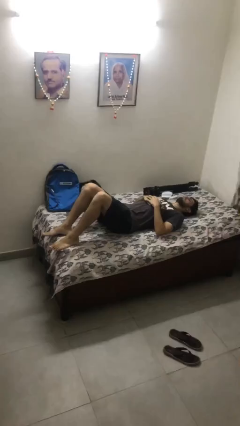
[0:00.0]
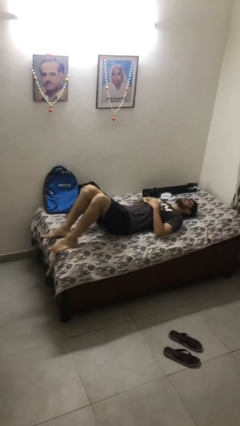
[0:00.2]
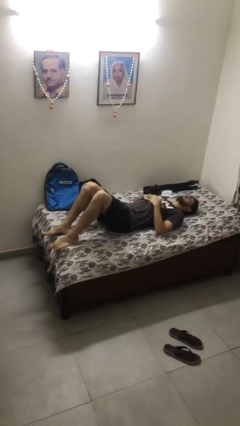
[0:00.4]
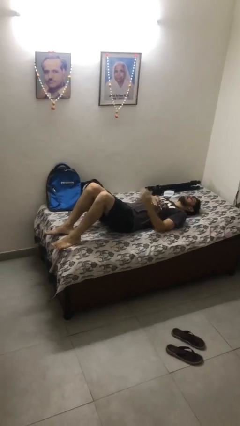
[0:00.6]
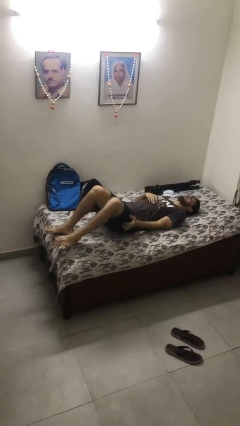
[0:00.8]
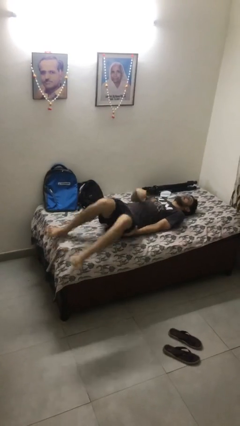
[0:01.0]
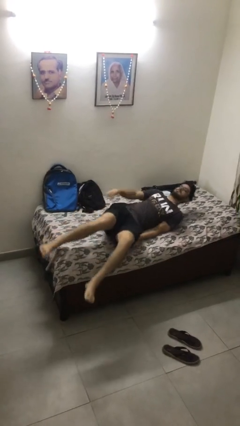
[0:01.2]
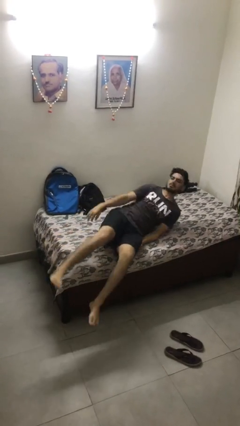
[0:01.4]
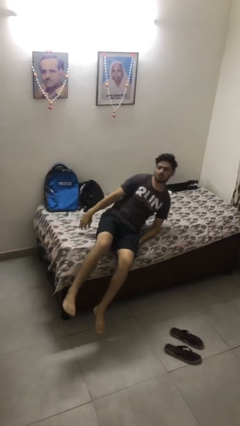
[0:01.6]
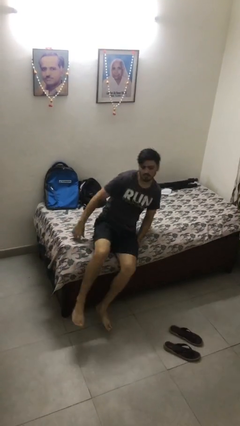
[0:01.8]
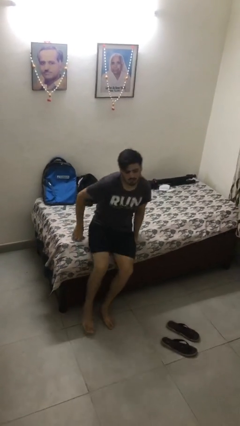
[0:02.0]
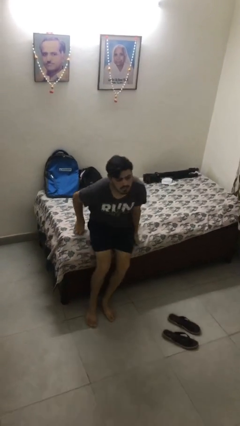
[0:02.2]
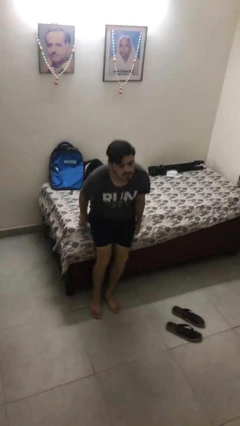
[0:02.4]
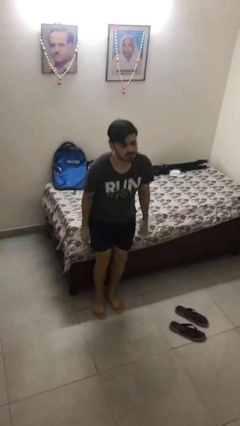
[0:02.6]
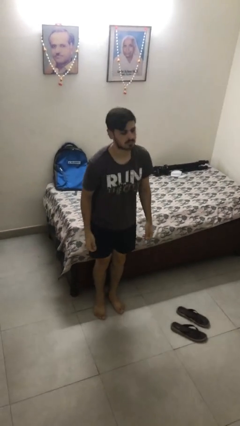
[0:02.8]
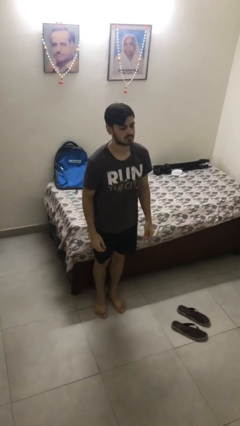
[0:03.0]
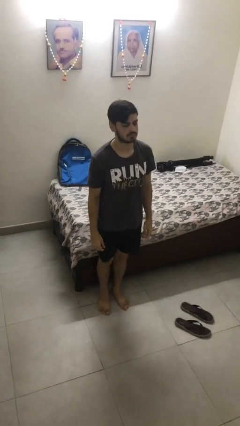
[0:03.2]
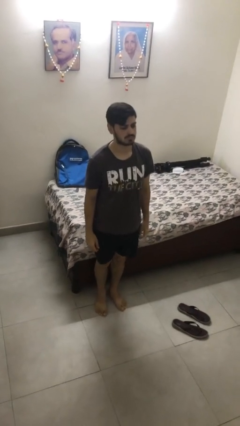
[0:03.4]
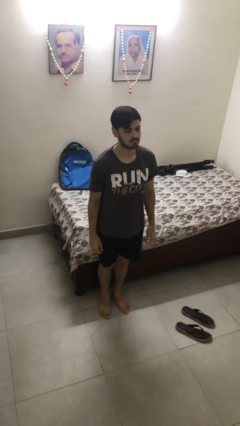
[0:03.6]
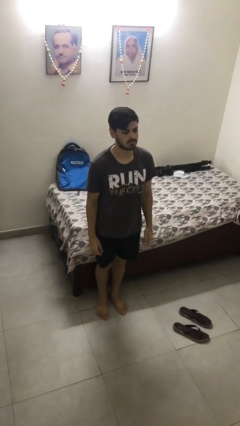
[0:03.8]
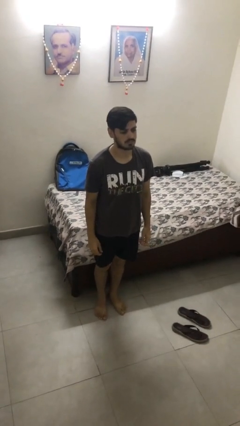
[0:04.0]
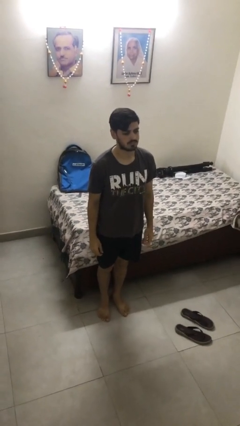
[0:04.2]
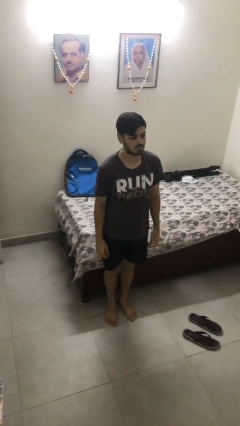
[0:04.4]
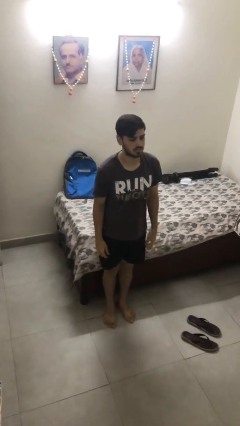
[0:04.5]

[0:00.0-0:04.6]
person stands up

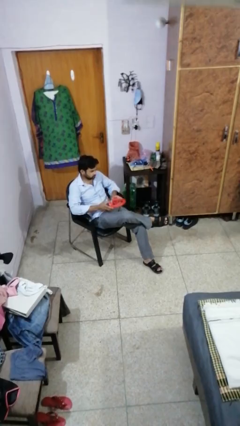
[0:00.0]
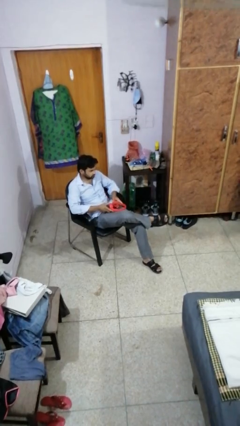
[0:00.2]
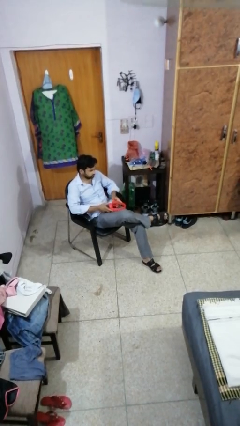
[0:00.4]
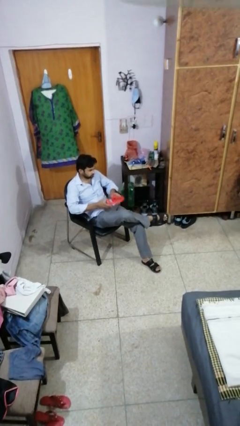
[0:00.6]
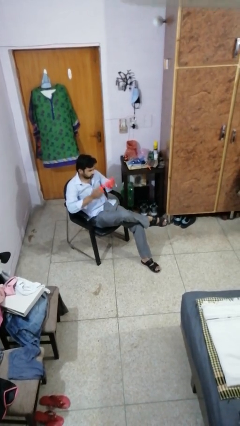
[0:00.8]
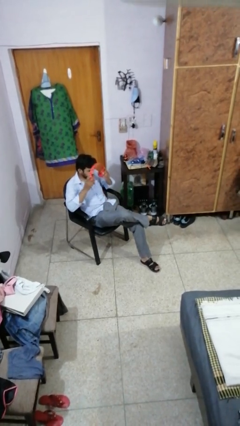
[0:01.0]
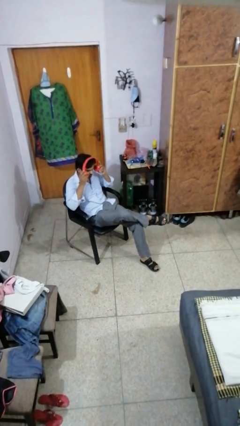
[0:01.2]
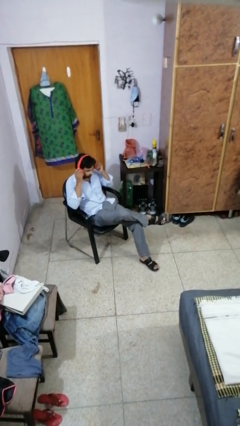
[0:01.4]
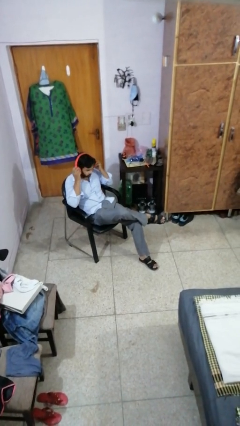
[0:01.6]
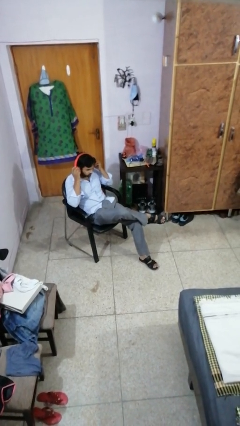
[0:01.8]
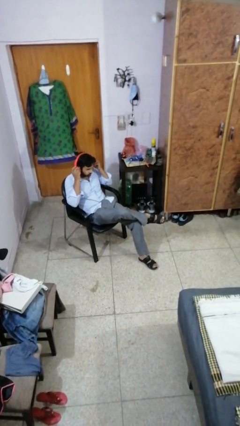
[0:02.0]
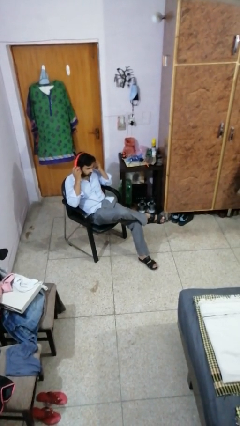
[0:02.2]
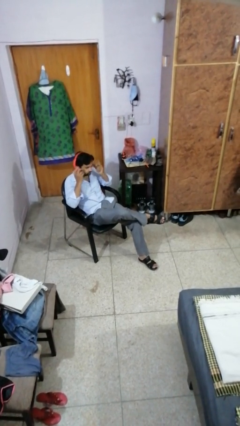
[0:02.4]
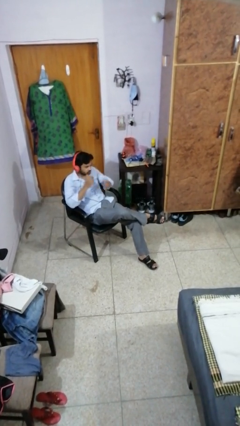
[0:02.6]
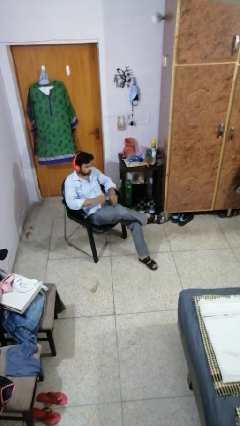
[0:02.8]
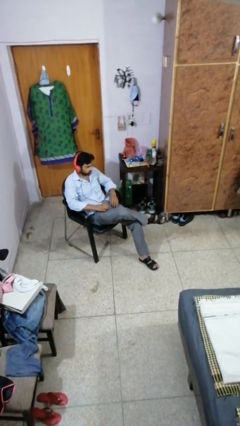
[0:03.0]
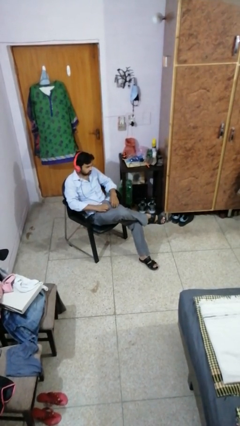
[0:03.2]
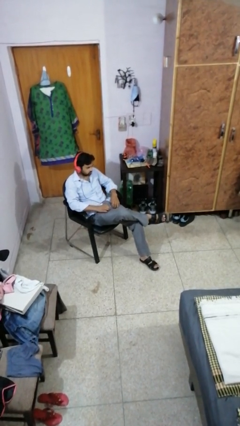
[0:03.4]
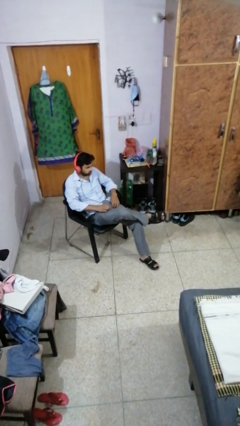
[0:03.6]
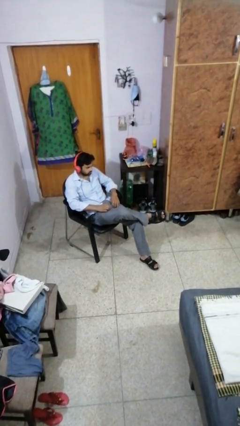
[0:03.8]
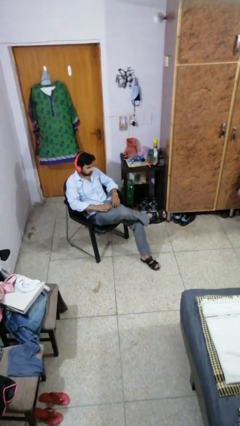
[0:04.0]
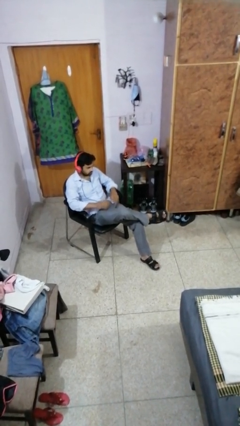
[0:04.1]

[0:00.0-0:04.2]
person puts on headphones

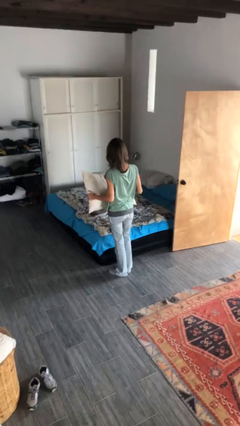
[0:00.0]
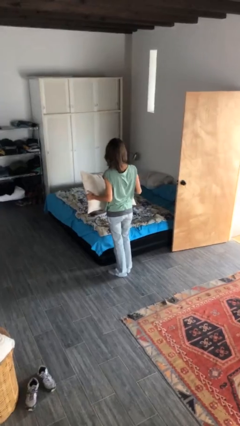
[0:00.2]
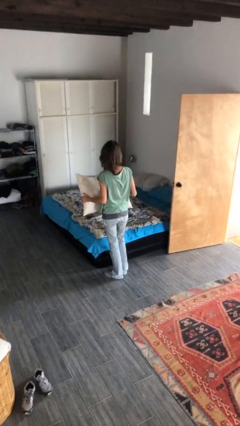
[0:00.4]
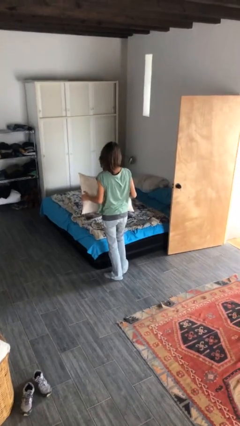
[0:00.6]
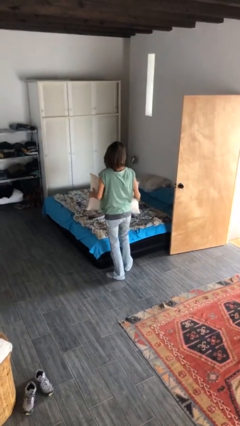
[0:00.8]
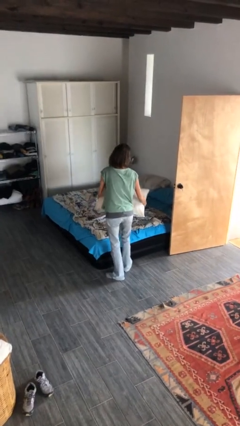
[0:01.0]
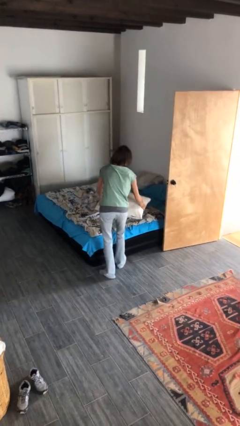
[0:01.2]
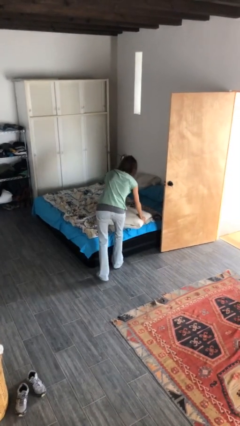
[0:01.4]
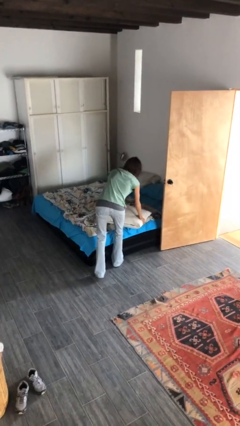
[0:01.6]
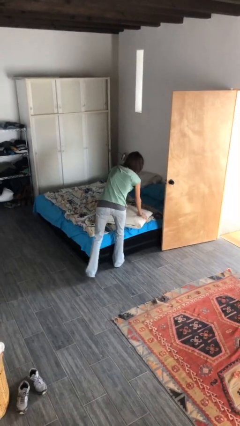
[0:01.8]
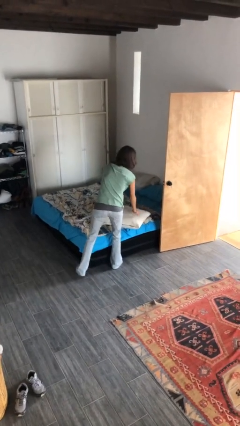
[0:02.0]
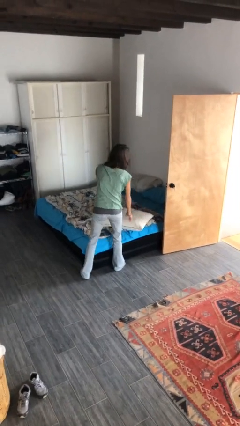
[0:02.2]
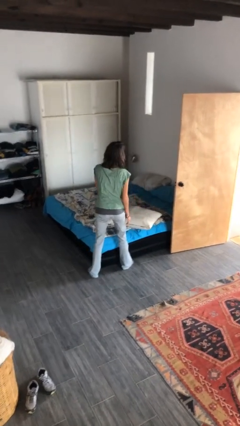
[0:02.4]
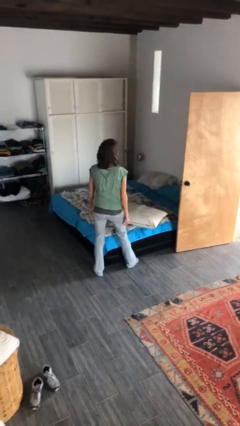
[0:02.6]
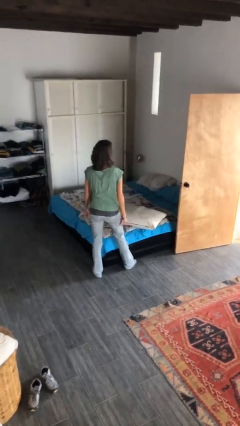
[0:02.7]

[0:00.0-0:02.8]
person puts down object on bed

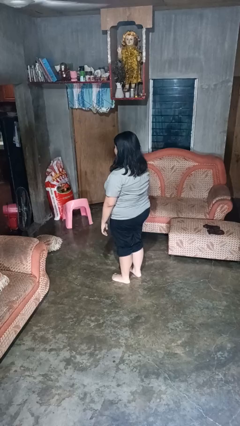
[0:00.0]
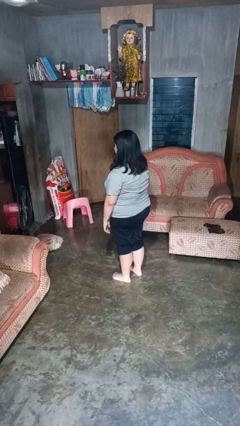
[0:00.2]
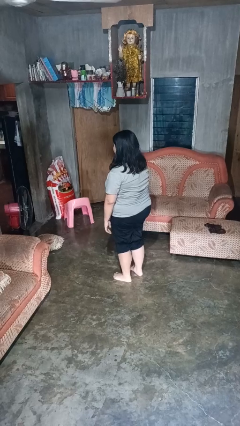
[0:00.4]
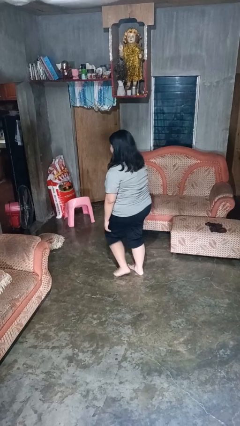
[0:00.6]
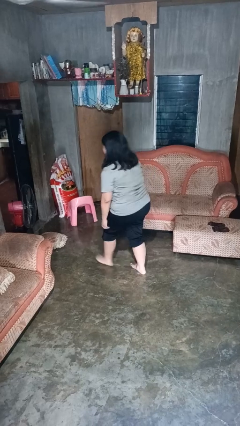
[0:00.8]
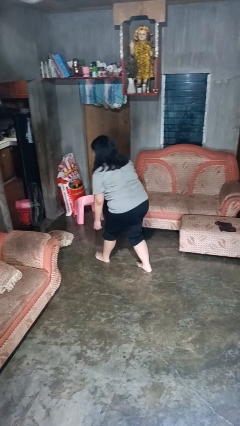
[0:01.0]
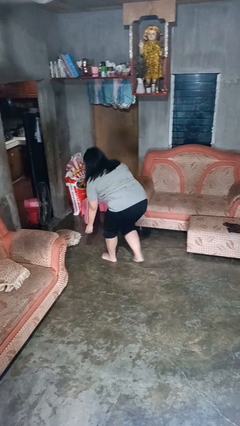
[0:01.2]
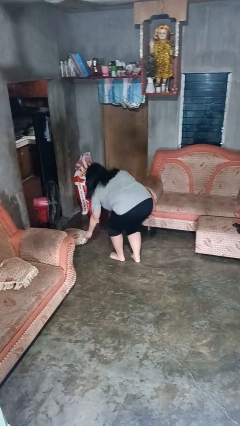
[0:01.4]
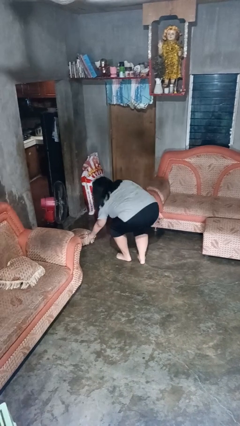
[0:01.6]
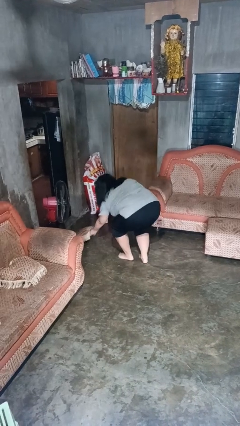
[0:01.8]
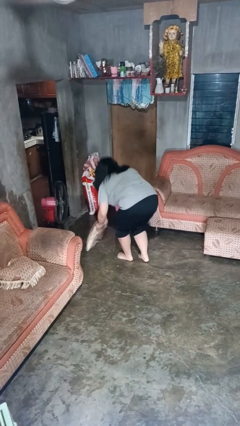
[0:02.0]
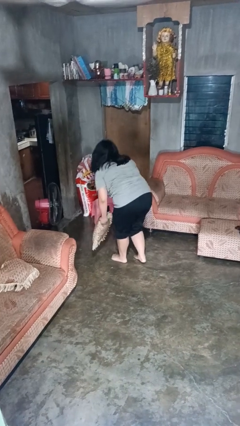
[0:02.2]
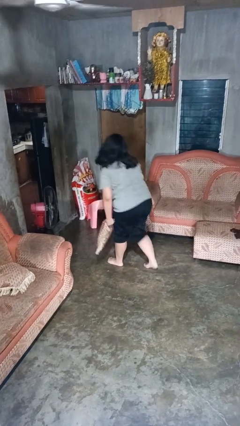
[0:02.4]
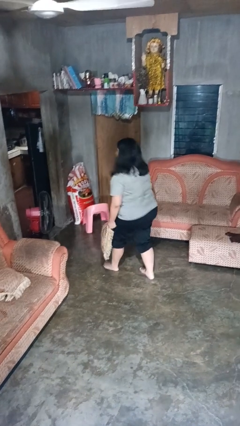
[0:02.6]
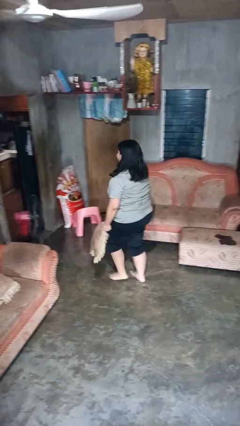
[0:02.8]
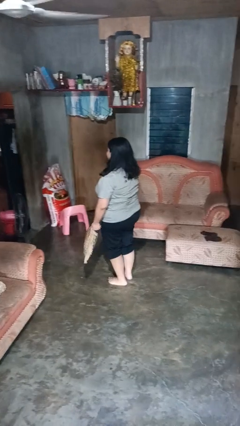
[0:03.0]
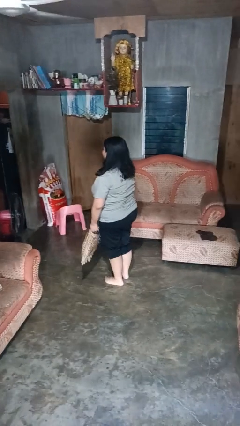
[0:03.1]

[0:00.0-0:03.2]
person picks up object from floor

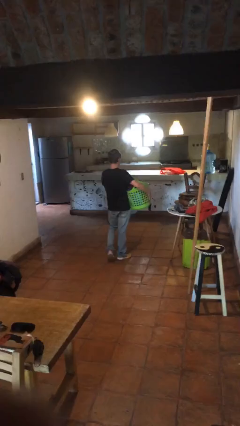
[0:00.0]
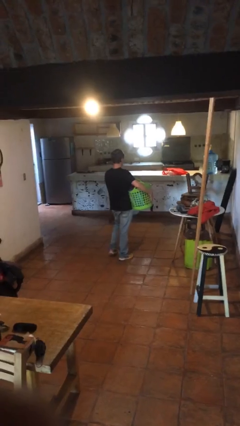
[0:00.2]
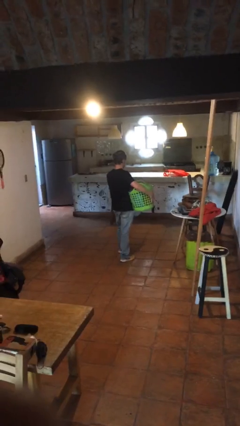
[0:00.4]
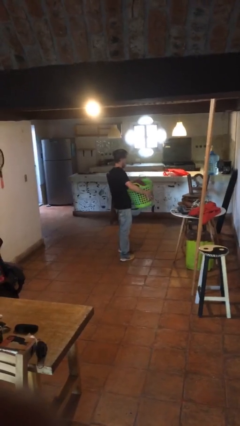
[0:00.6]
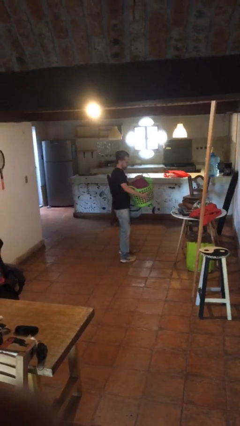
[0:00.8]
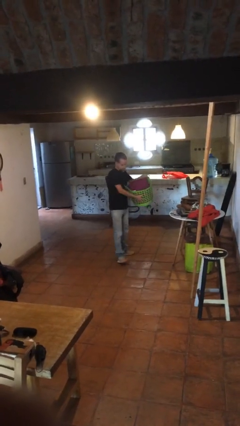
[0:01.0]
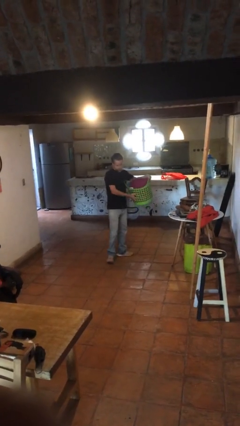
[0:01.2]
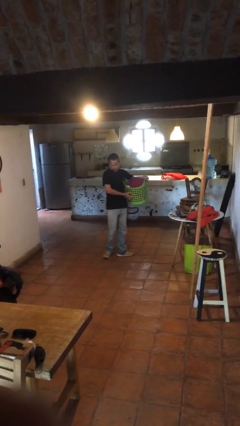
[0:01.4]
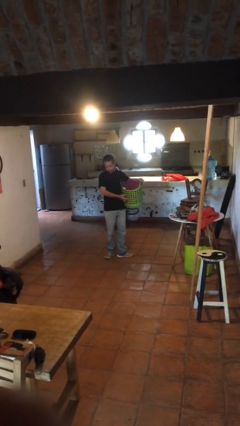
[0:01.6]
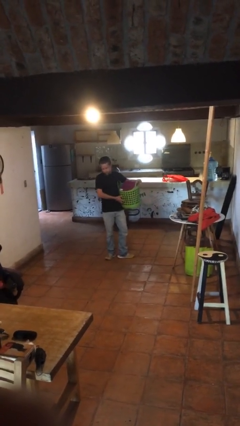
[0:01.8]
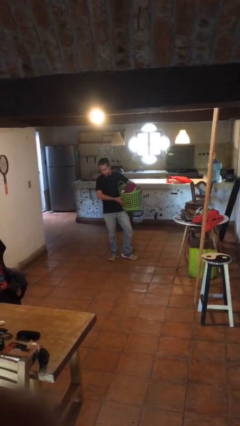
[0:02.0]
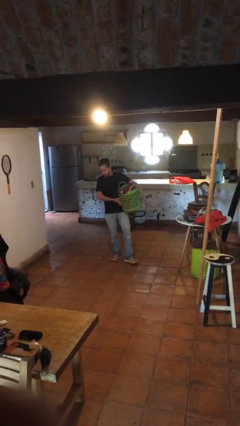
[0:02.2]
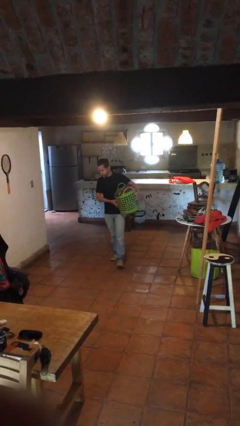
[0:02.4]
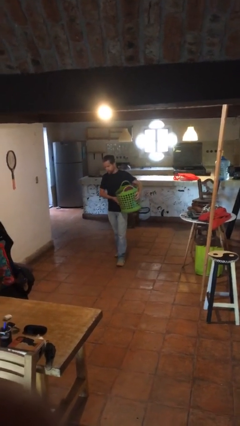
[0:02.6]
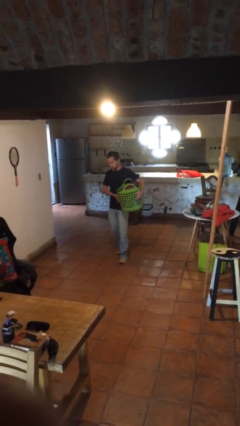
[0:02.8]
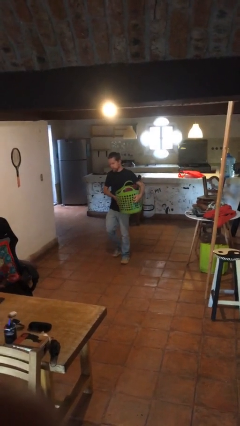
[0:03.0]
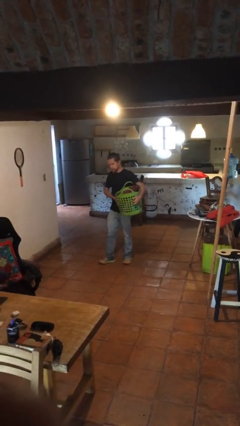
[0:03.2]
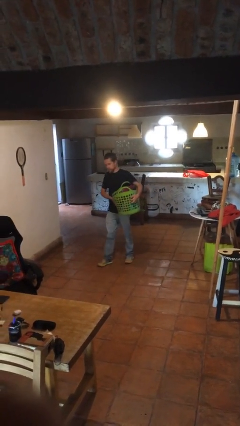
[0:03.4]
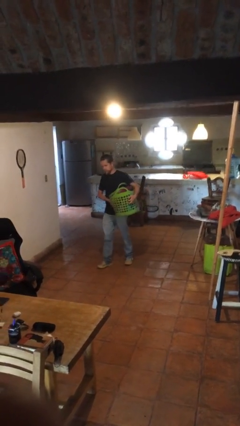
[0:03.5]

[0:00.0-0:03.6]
person carries laundry basket
